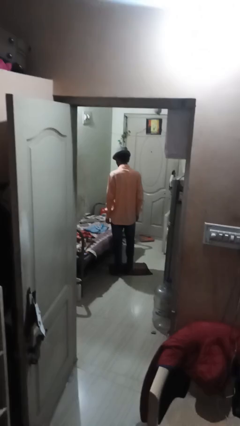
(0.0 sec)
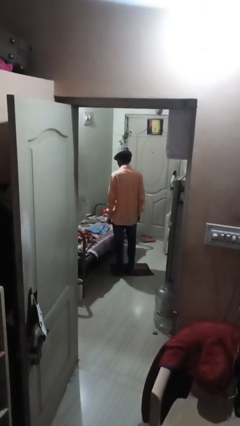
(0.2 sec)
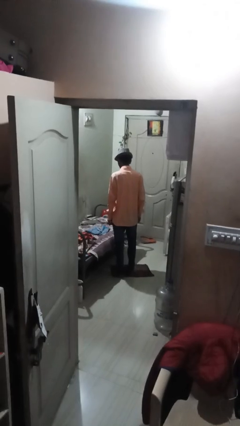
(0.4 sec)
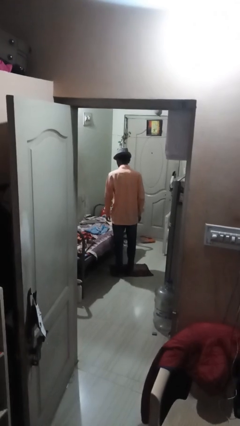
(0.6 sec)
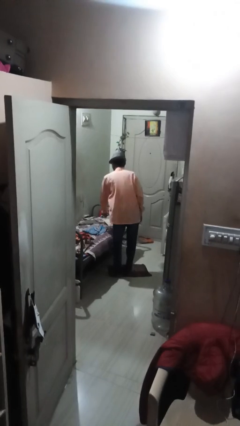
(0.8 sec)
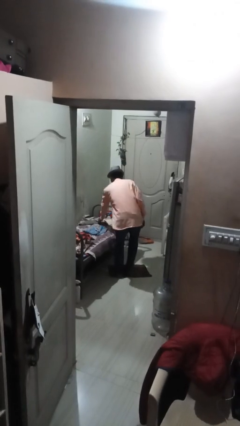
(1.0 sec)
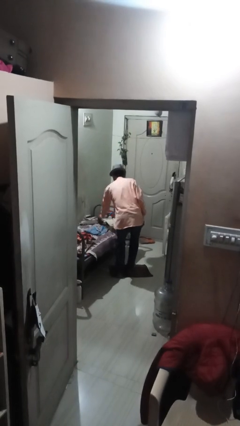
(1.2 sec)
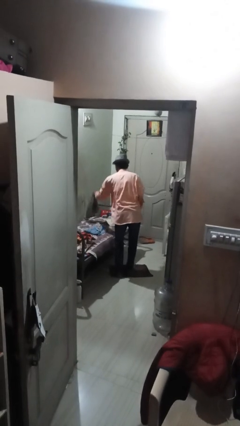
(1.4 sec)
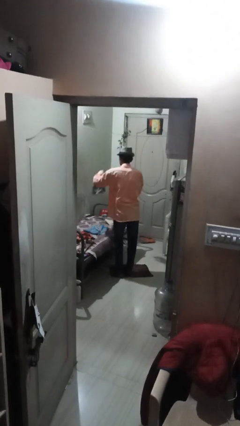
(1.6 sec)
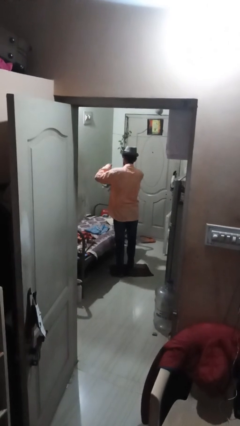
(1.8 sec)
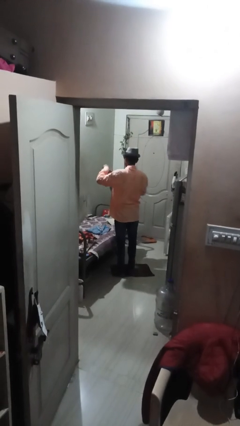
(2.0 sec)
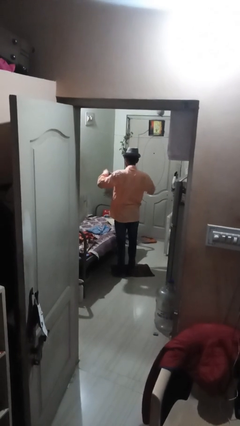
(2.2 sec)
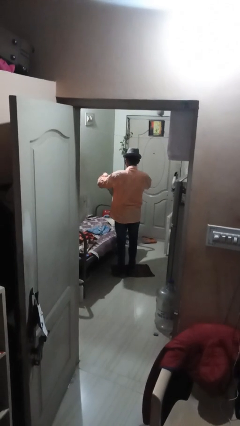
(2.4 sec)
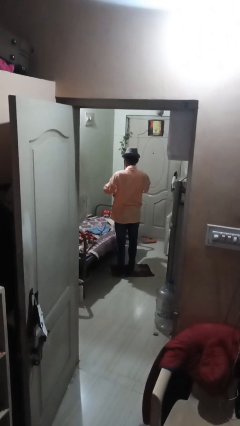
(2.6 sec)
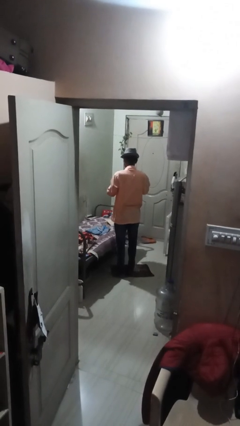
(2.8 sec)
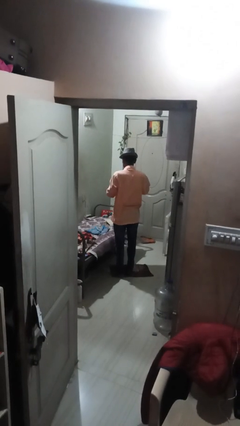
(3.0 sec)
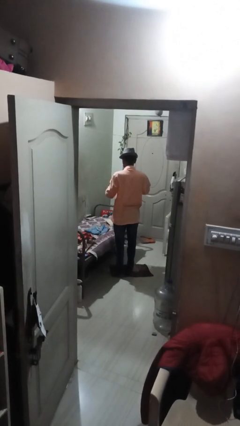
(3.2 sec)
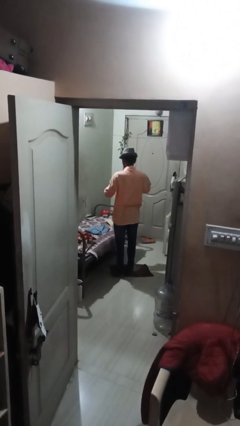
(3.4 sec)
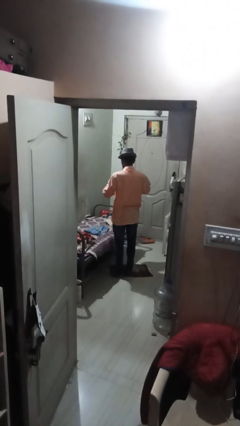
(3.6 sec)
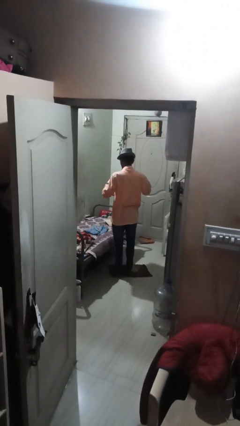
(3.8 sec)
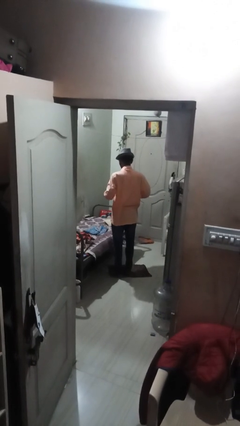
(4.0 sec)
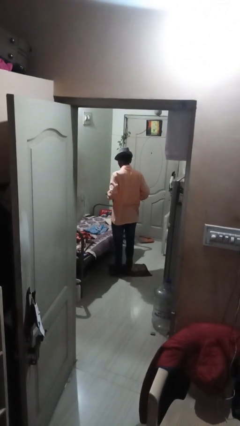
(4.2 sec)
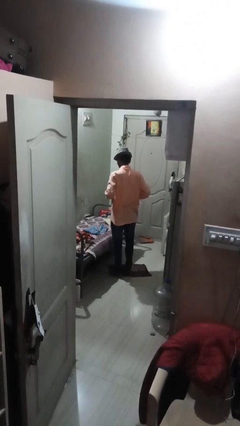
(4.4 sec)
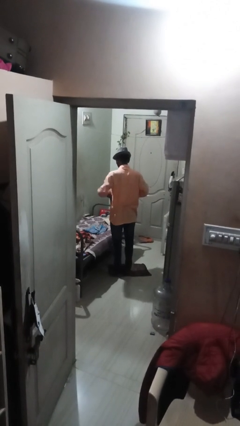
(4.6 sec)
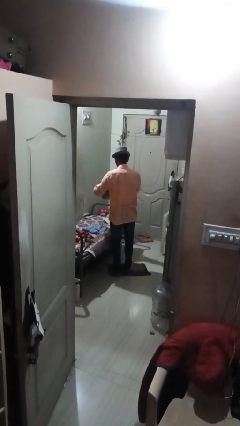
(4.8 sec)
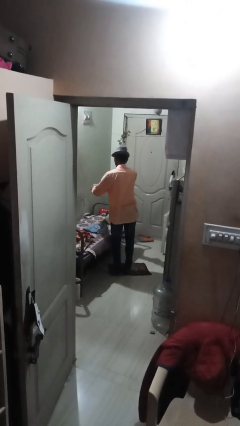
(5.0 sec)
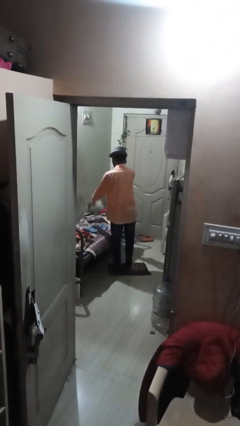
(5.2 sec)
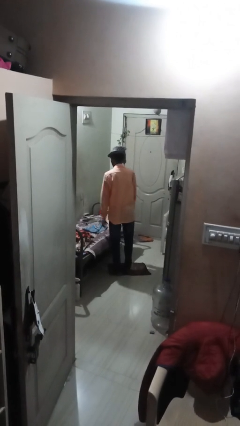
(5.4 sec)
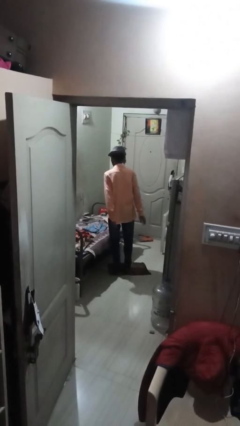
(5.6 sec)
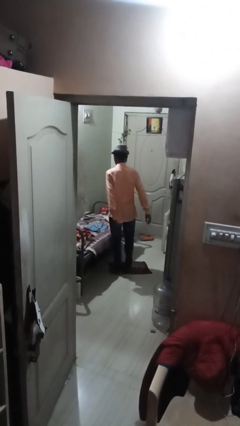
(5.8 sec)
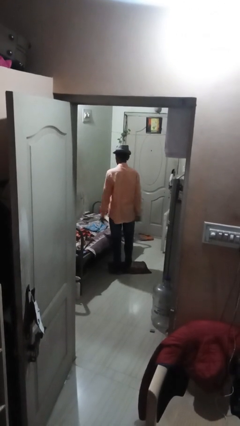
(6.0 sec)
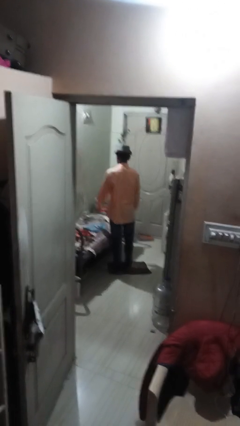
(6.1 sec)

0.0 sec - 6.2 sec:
person folds towel

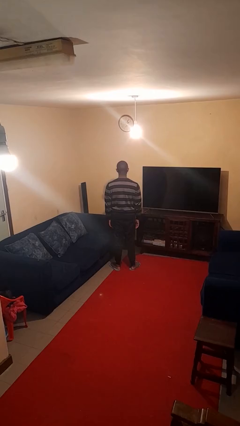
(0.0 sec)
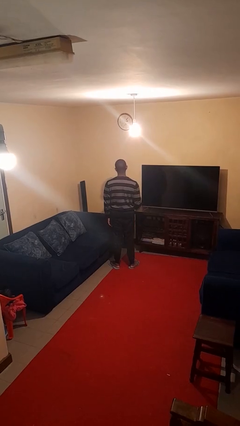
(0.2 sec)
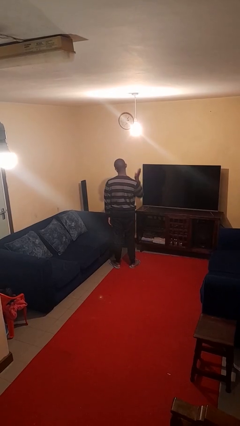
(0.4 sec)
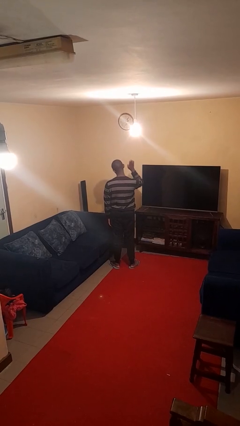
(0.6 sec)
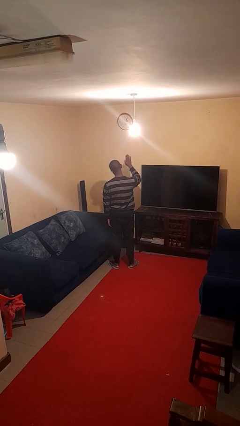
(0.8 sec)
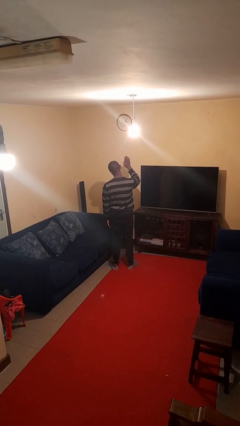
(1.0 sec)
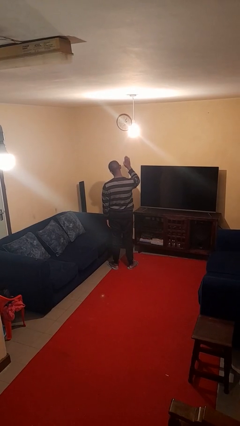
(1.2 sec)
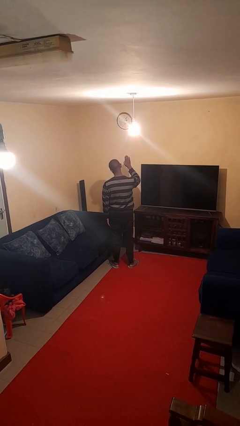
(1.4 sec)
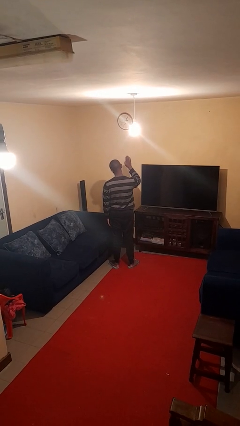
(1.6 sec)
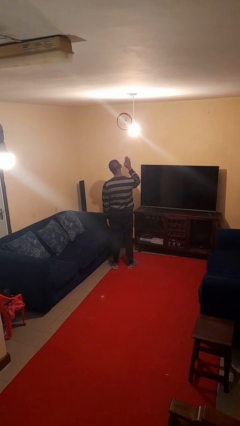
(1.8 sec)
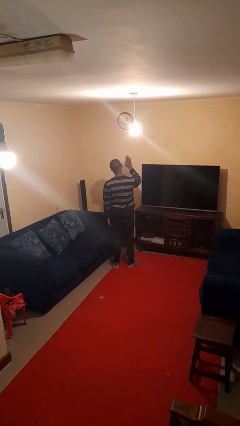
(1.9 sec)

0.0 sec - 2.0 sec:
person gestures stop

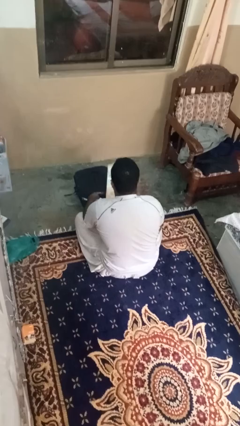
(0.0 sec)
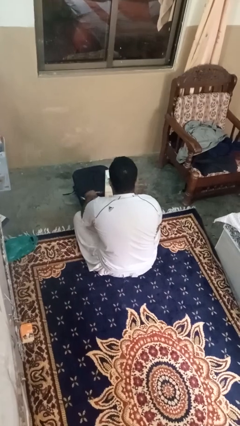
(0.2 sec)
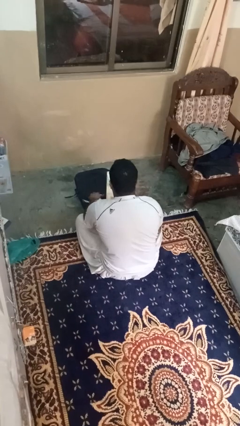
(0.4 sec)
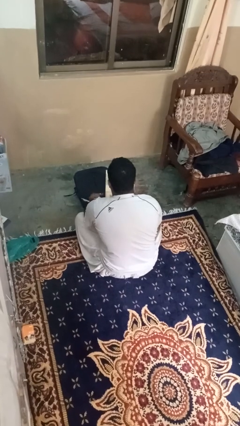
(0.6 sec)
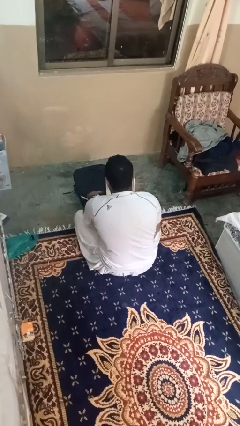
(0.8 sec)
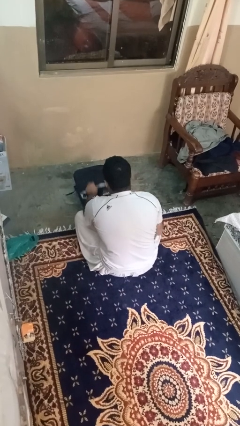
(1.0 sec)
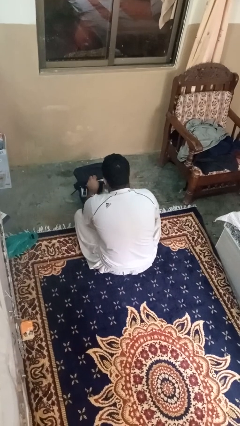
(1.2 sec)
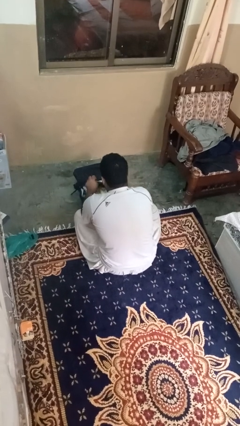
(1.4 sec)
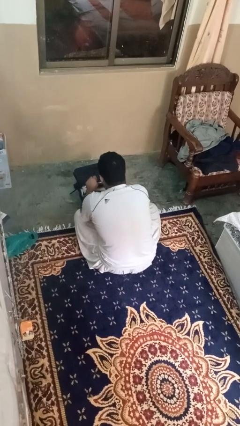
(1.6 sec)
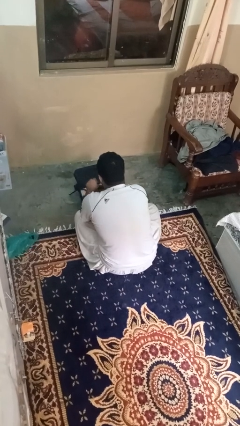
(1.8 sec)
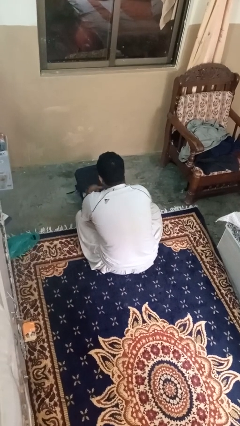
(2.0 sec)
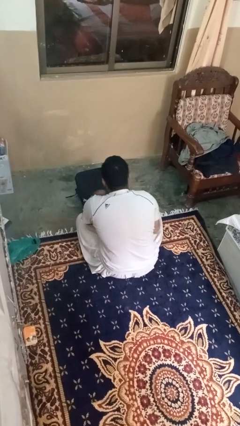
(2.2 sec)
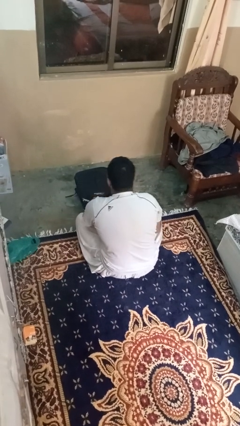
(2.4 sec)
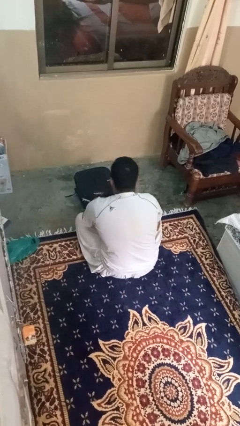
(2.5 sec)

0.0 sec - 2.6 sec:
person puts object into bag

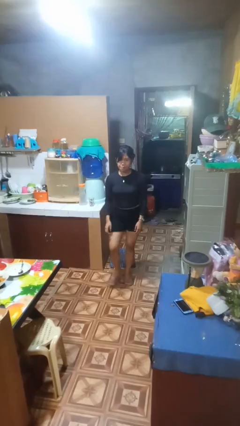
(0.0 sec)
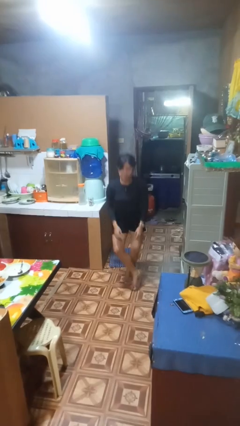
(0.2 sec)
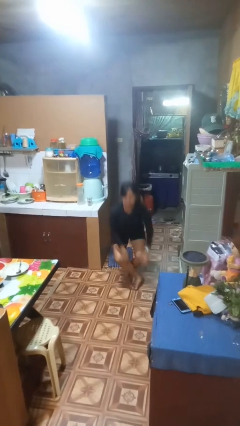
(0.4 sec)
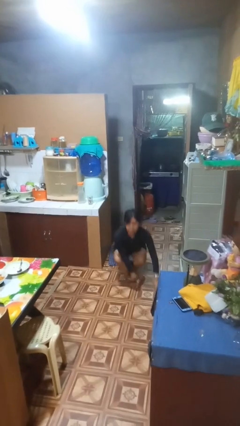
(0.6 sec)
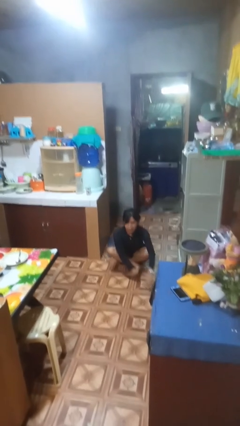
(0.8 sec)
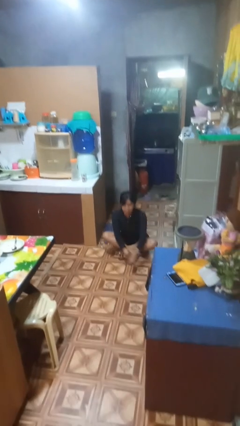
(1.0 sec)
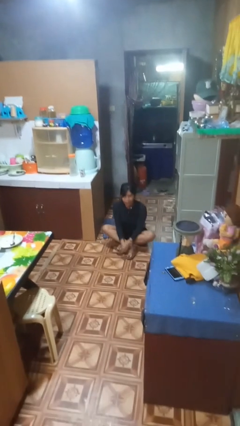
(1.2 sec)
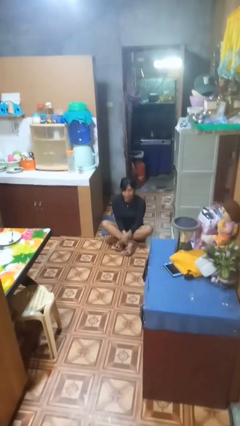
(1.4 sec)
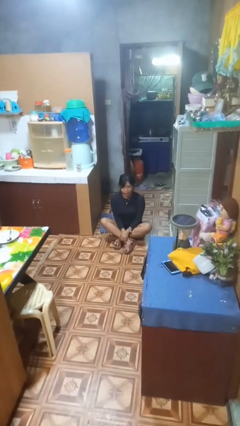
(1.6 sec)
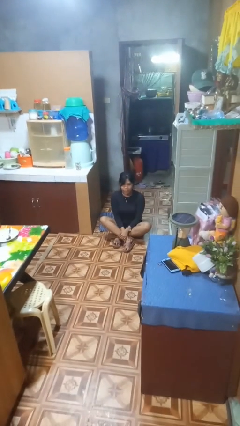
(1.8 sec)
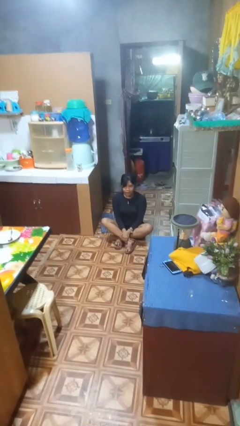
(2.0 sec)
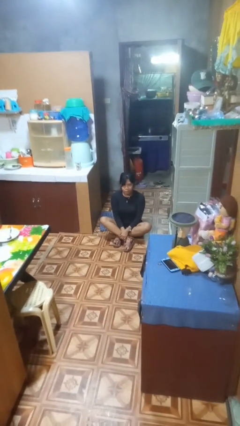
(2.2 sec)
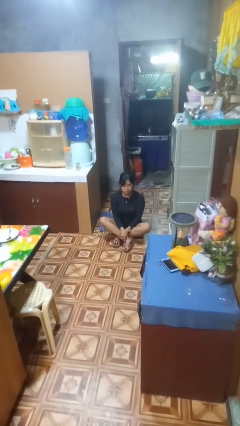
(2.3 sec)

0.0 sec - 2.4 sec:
person sits crisscross

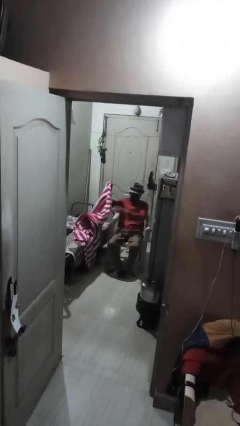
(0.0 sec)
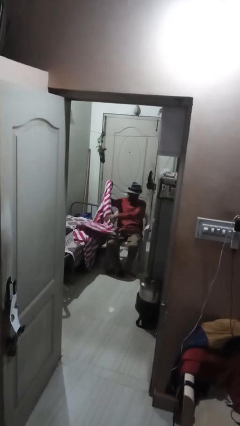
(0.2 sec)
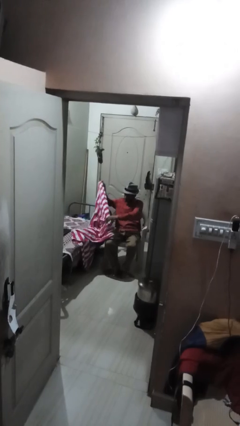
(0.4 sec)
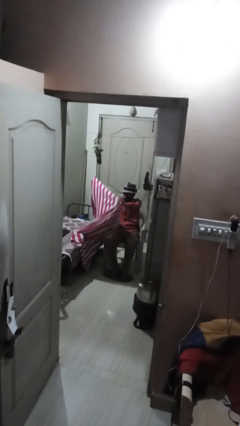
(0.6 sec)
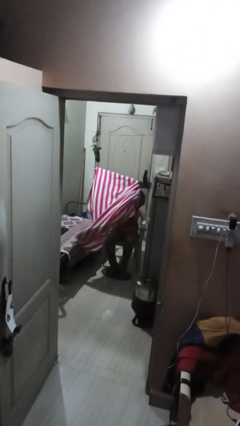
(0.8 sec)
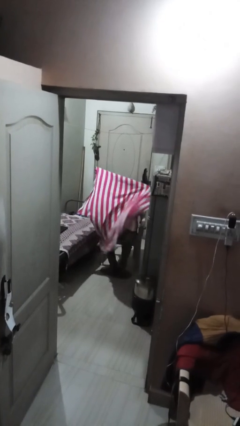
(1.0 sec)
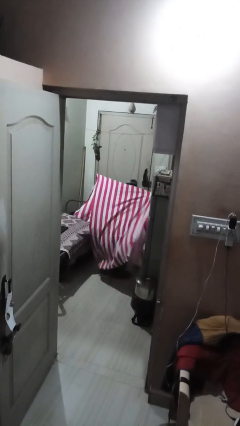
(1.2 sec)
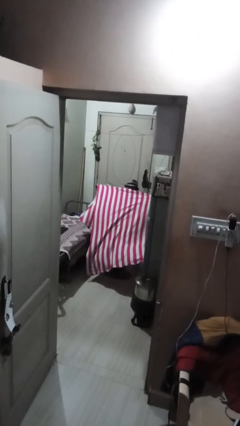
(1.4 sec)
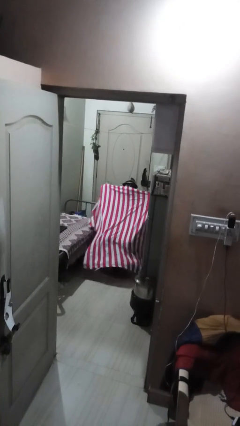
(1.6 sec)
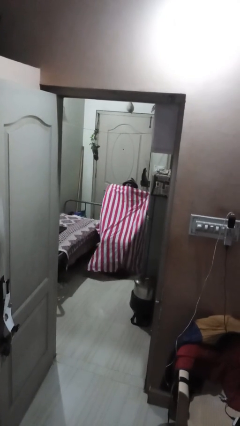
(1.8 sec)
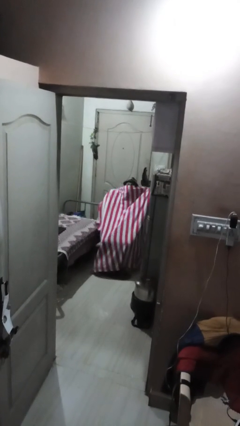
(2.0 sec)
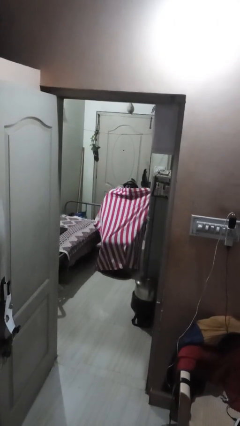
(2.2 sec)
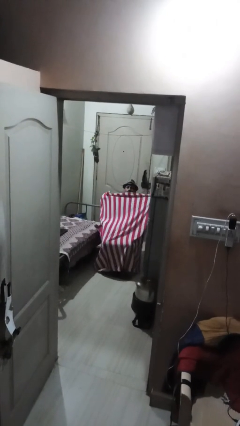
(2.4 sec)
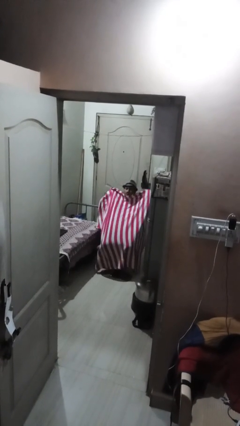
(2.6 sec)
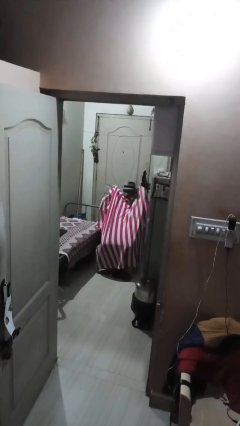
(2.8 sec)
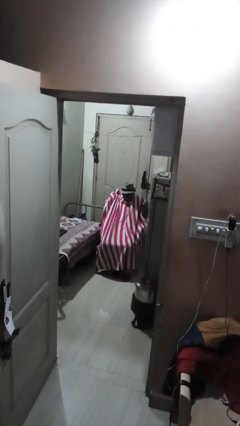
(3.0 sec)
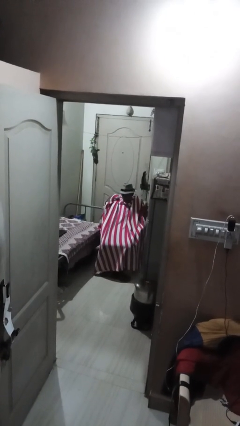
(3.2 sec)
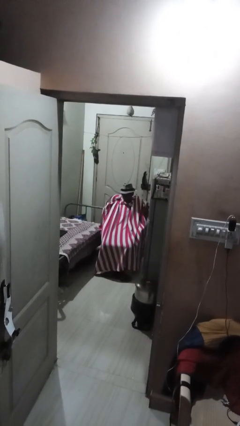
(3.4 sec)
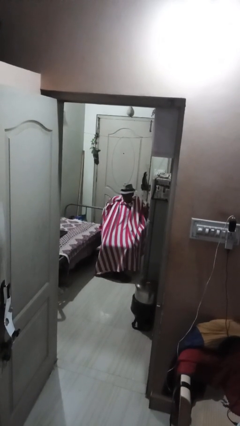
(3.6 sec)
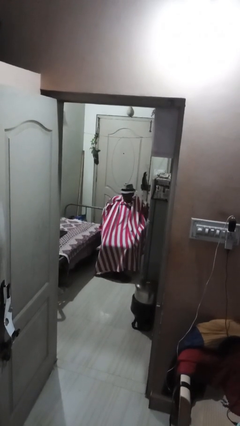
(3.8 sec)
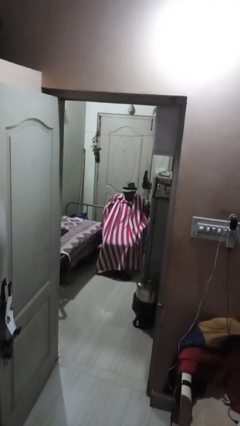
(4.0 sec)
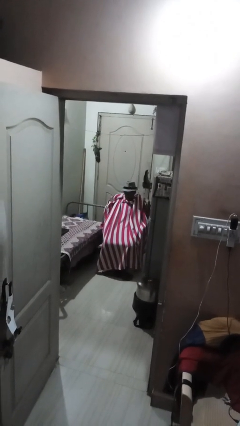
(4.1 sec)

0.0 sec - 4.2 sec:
person covers with blanket

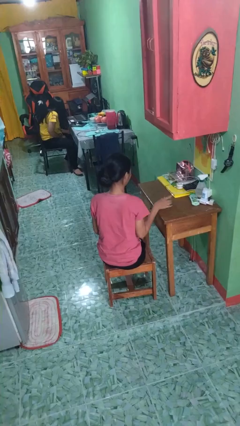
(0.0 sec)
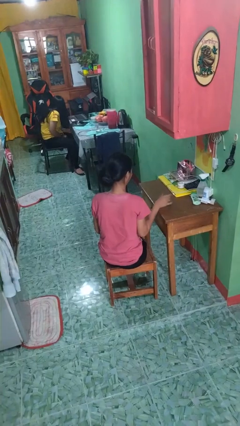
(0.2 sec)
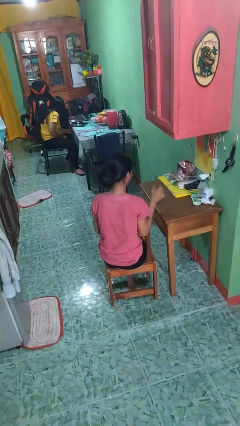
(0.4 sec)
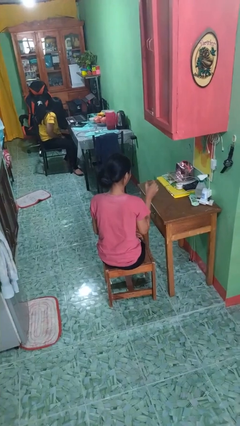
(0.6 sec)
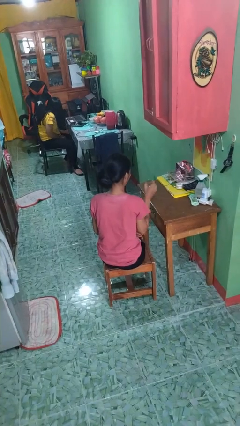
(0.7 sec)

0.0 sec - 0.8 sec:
person picks up object from table
